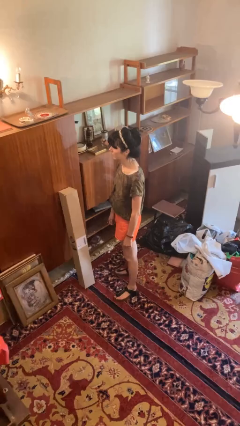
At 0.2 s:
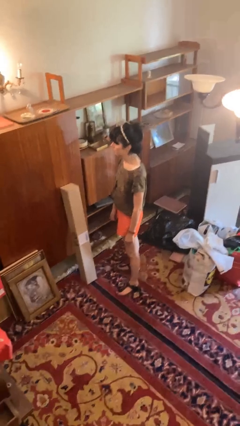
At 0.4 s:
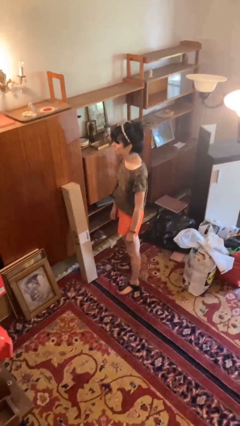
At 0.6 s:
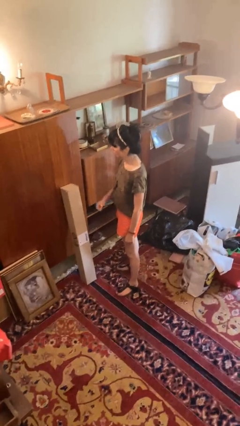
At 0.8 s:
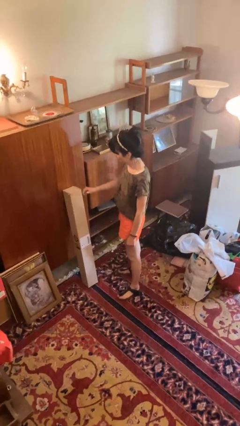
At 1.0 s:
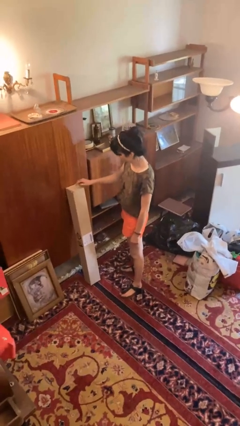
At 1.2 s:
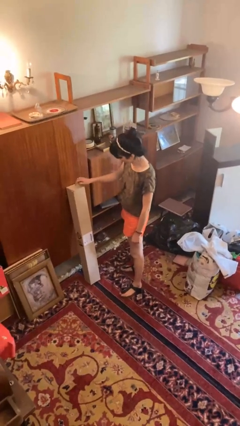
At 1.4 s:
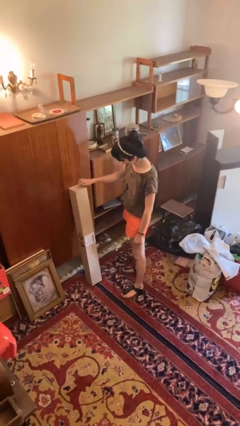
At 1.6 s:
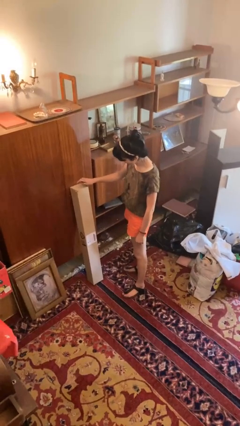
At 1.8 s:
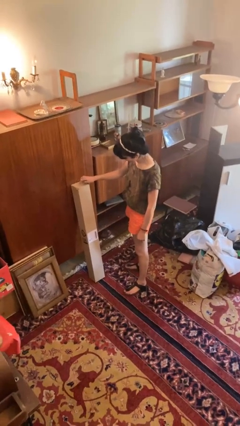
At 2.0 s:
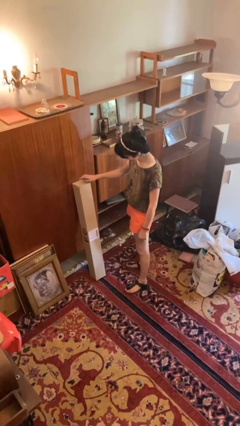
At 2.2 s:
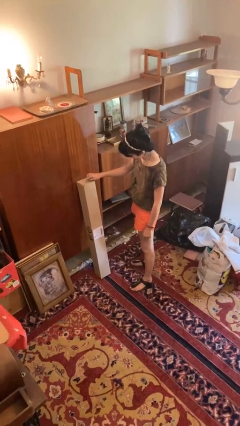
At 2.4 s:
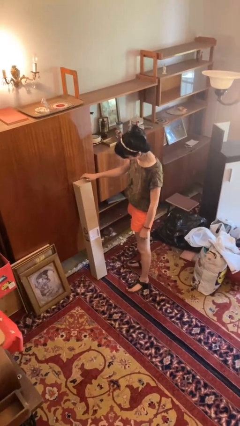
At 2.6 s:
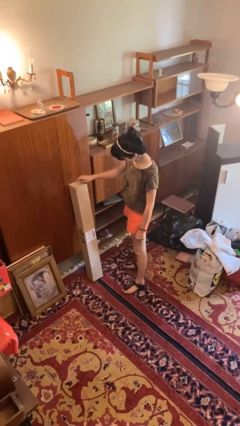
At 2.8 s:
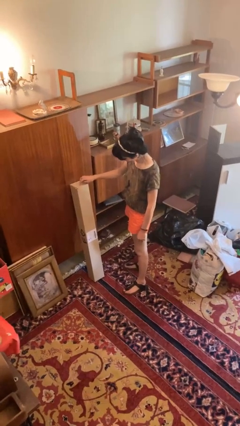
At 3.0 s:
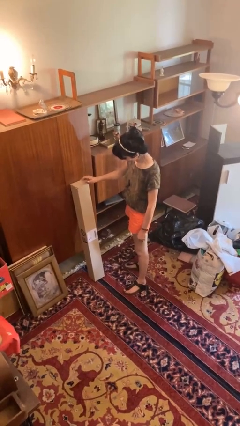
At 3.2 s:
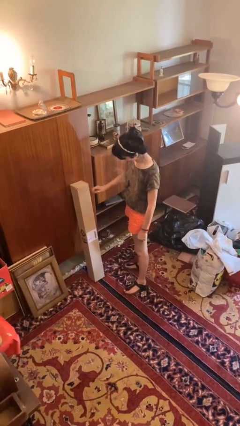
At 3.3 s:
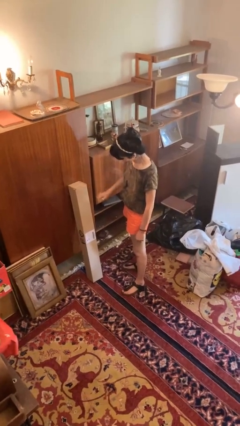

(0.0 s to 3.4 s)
person taps object with finger

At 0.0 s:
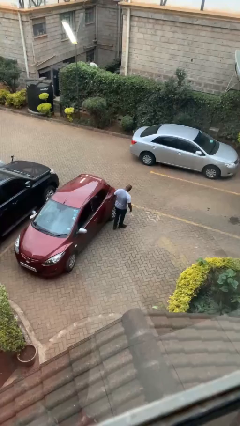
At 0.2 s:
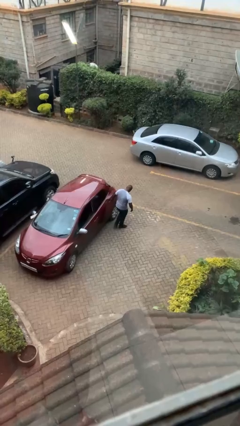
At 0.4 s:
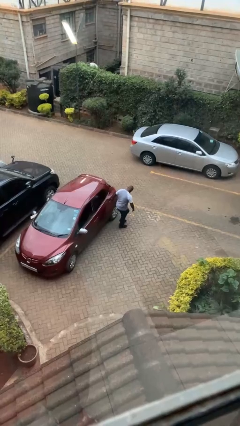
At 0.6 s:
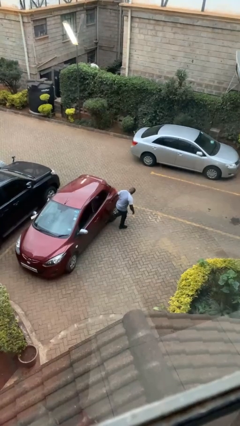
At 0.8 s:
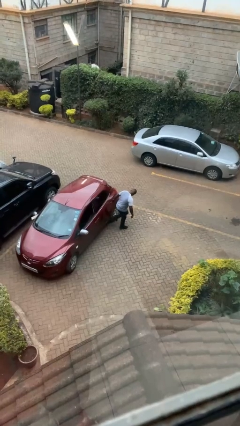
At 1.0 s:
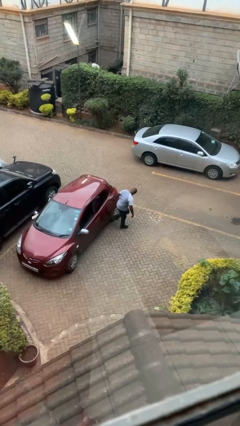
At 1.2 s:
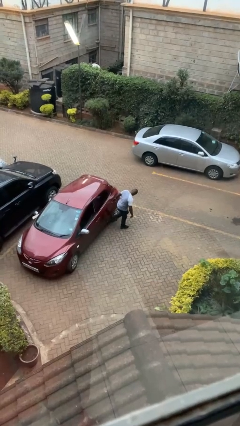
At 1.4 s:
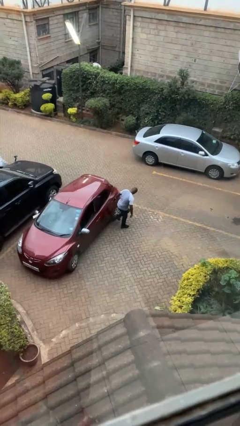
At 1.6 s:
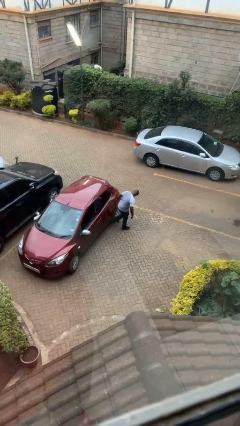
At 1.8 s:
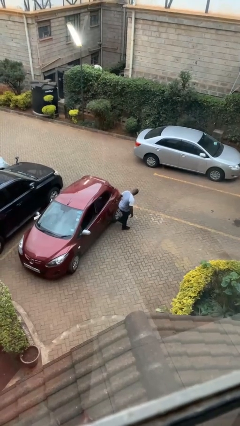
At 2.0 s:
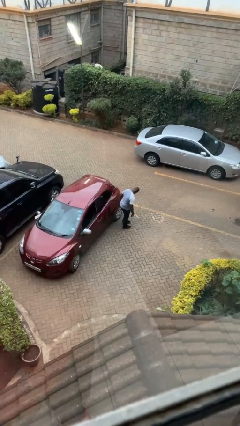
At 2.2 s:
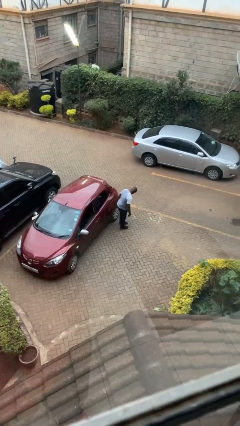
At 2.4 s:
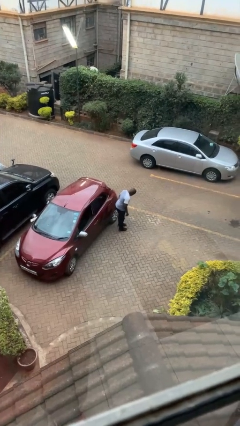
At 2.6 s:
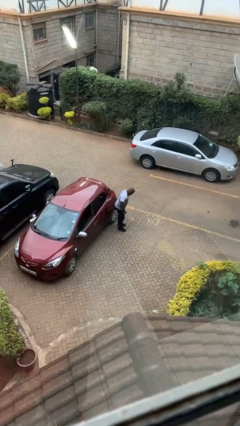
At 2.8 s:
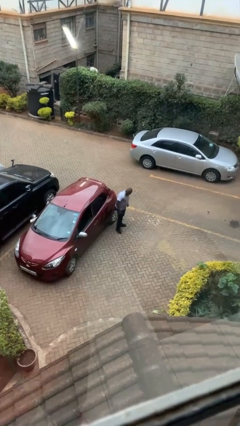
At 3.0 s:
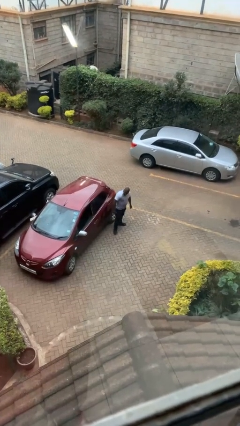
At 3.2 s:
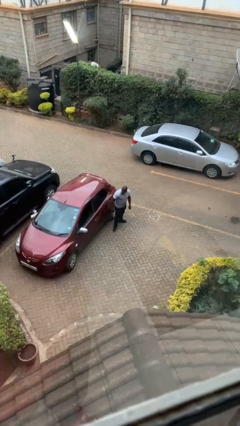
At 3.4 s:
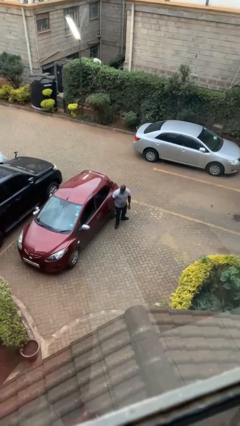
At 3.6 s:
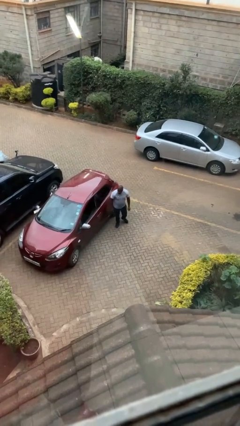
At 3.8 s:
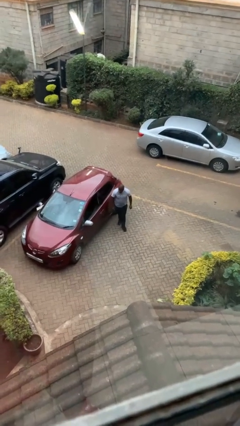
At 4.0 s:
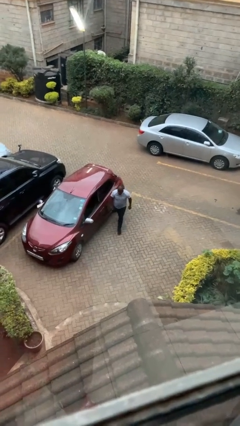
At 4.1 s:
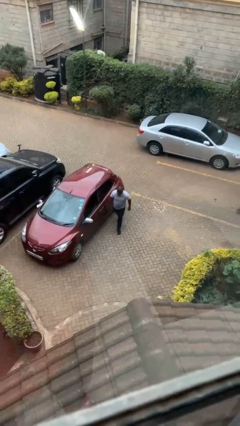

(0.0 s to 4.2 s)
person kicks car tires

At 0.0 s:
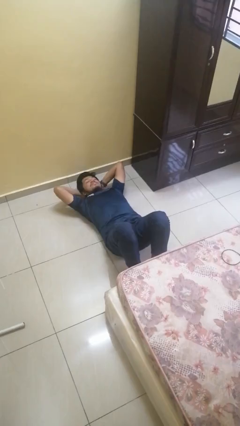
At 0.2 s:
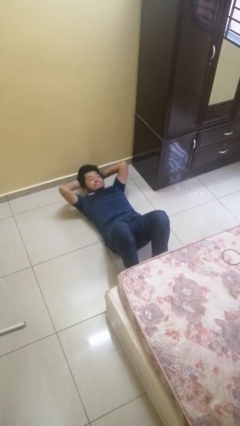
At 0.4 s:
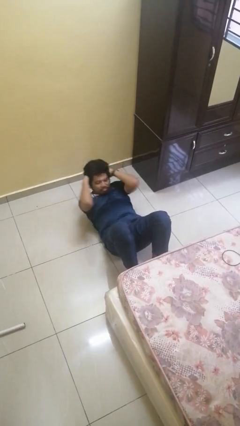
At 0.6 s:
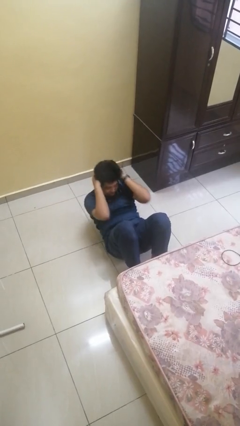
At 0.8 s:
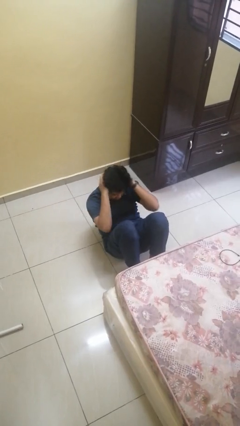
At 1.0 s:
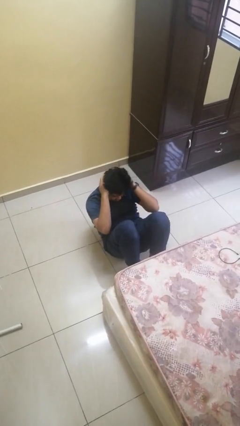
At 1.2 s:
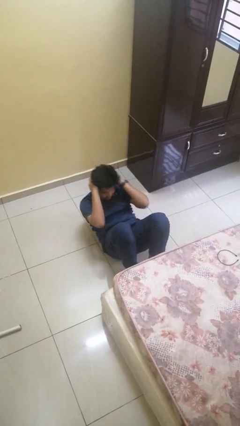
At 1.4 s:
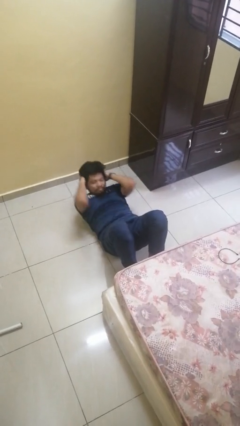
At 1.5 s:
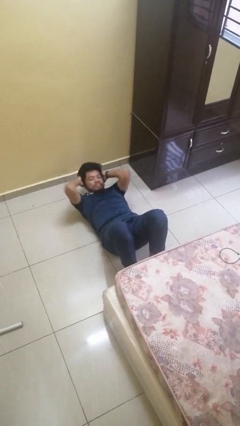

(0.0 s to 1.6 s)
person exercises with situp

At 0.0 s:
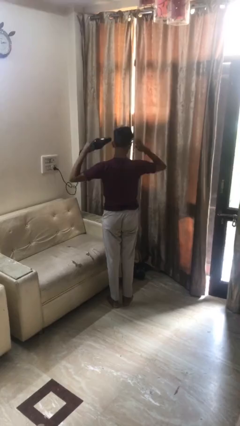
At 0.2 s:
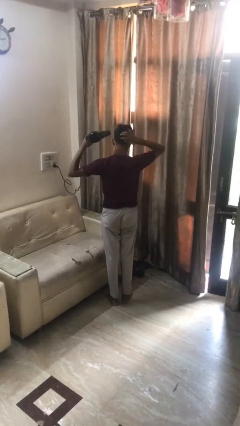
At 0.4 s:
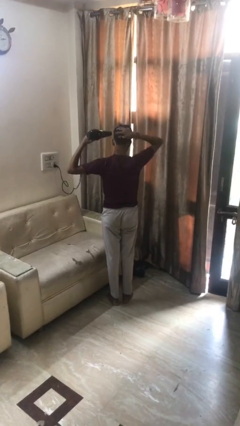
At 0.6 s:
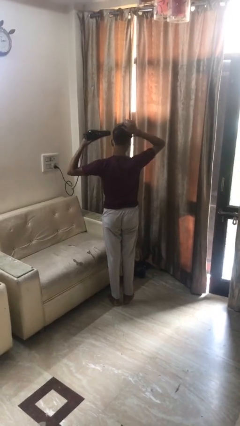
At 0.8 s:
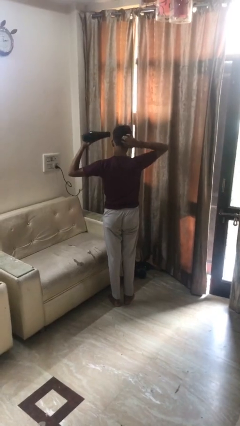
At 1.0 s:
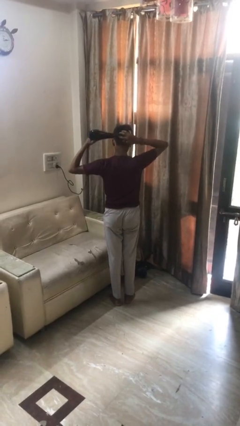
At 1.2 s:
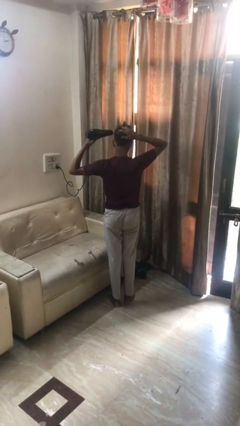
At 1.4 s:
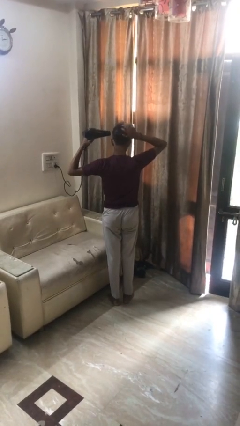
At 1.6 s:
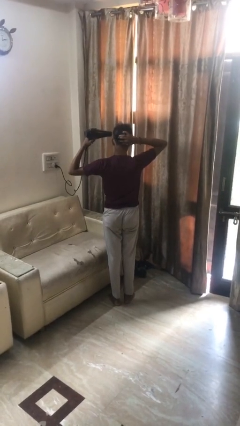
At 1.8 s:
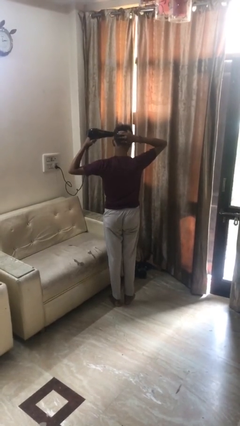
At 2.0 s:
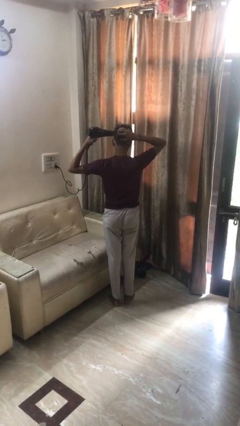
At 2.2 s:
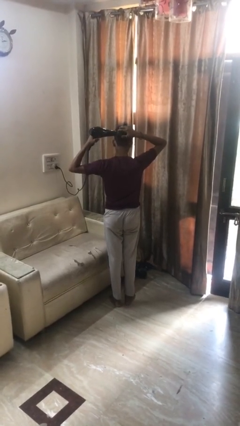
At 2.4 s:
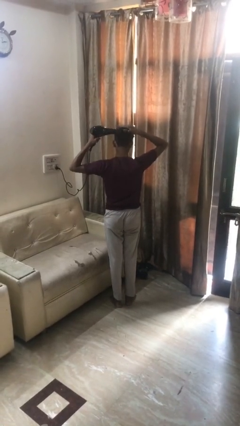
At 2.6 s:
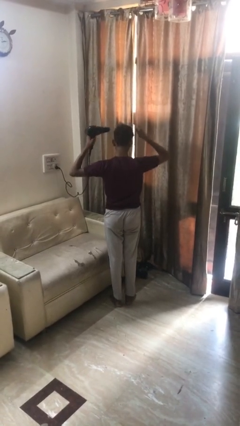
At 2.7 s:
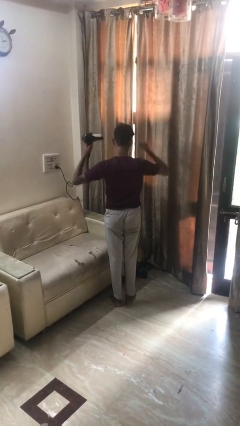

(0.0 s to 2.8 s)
person dries hair with hairdryer

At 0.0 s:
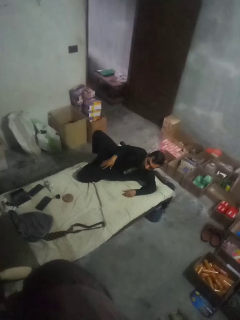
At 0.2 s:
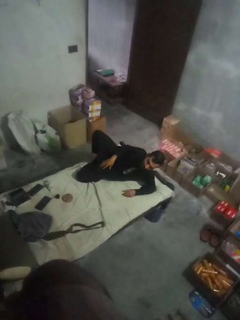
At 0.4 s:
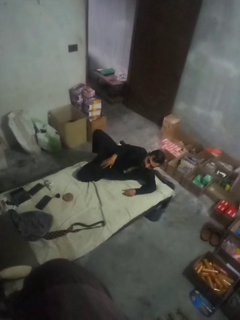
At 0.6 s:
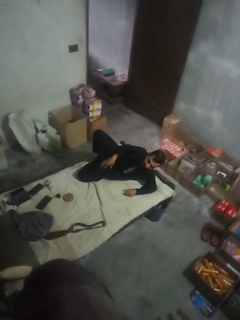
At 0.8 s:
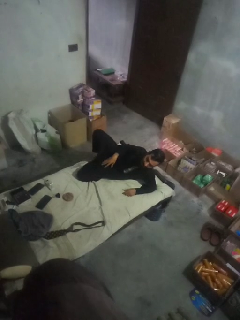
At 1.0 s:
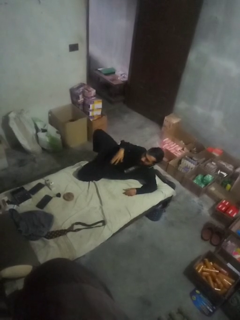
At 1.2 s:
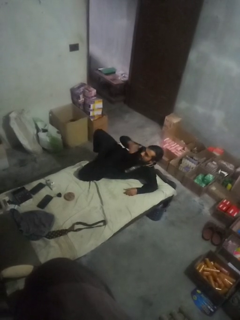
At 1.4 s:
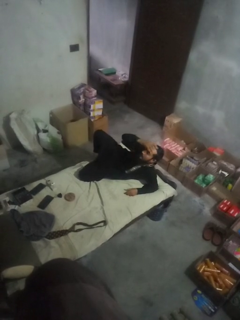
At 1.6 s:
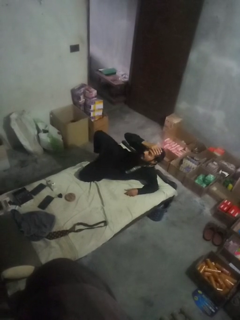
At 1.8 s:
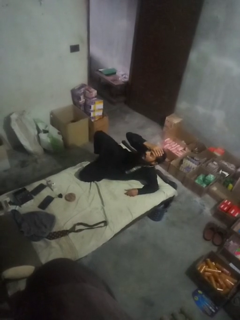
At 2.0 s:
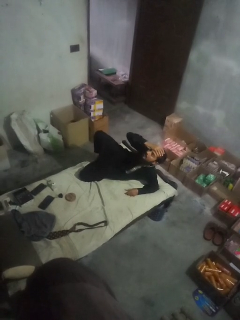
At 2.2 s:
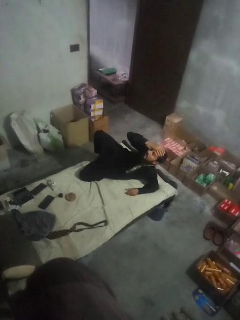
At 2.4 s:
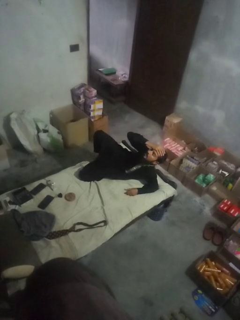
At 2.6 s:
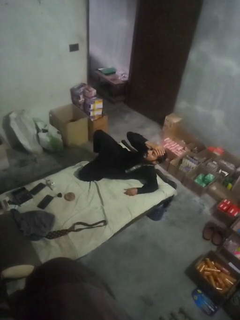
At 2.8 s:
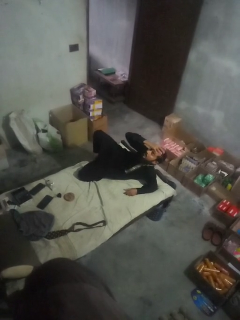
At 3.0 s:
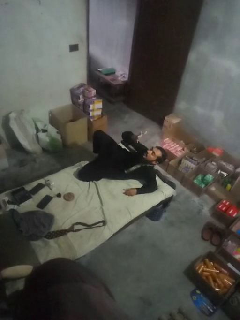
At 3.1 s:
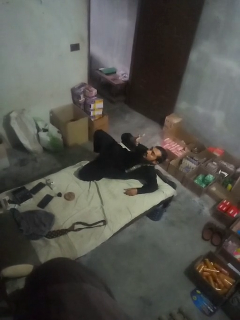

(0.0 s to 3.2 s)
person pats head

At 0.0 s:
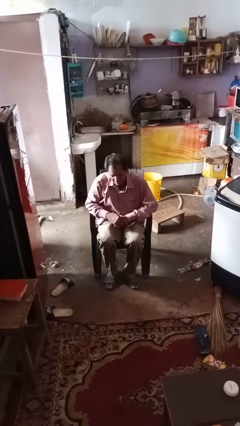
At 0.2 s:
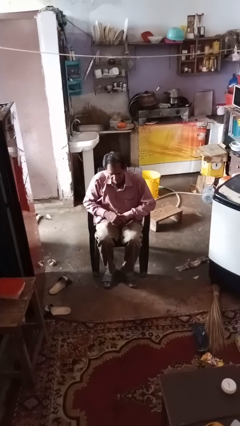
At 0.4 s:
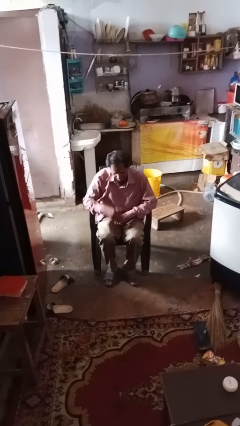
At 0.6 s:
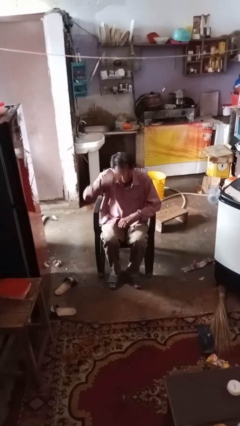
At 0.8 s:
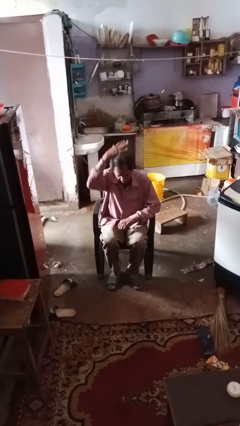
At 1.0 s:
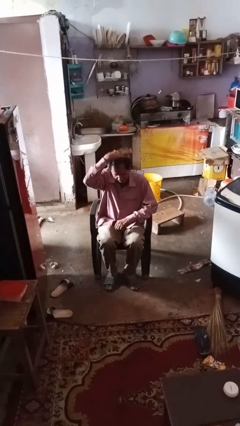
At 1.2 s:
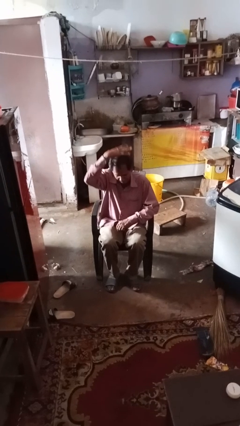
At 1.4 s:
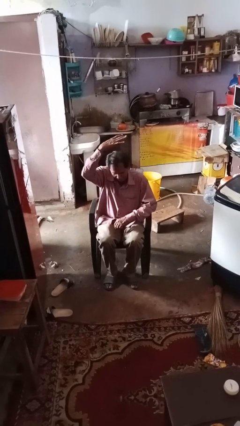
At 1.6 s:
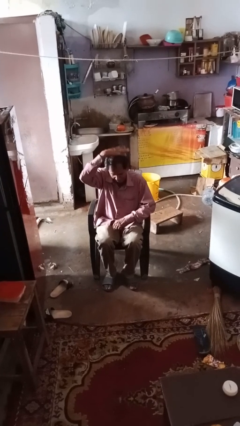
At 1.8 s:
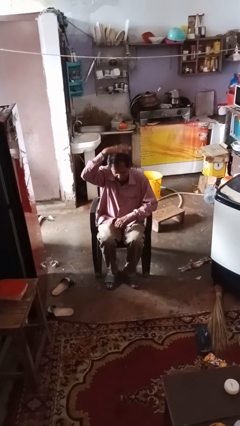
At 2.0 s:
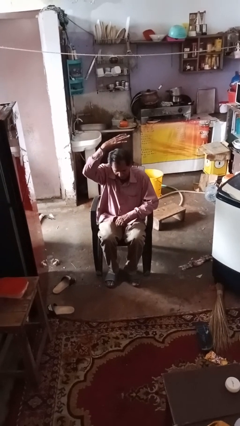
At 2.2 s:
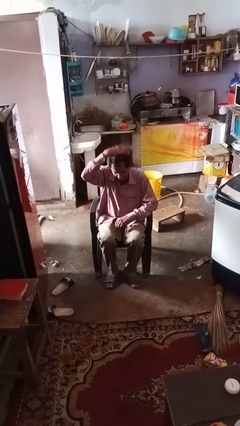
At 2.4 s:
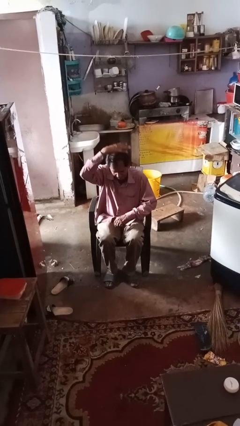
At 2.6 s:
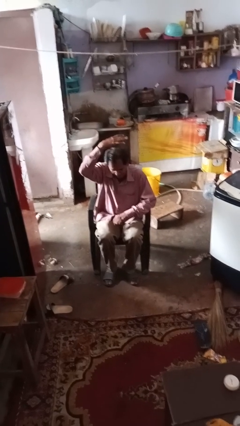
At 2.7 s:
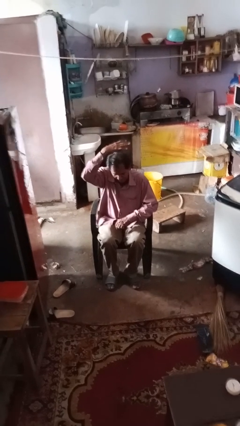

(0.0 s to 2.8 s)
person holds object above head
